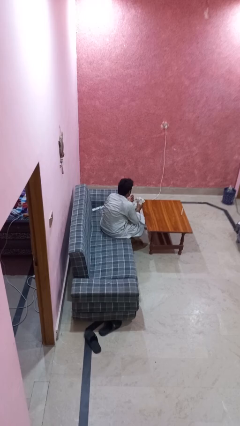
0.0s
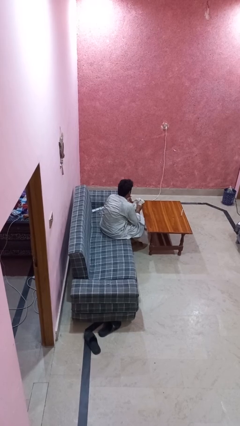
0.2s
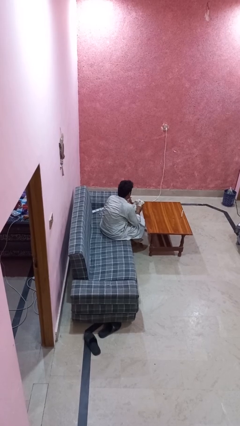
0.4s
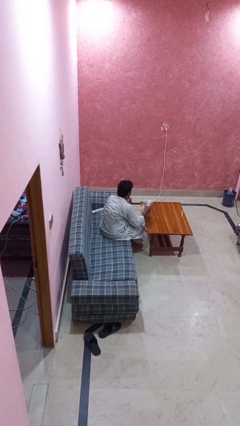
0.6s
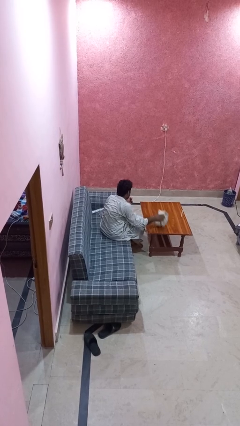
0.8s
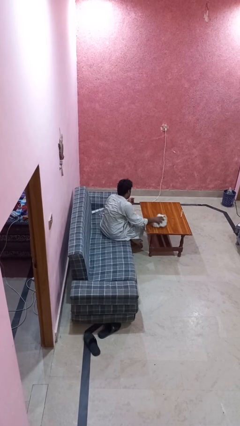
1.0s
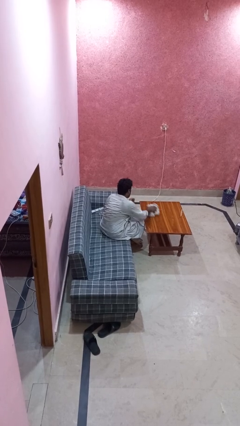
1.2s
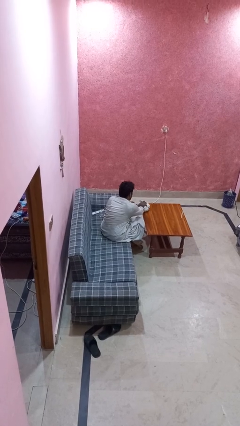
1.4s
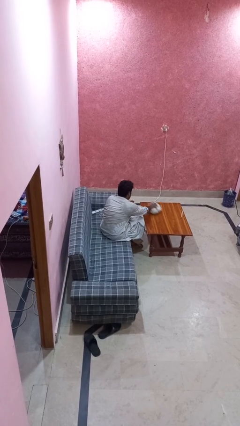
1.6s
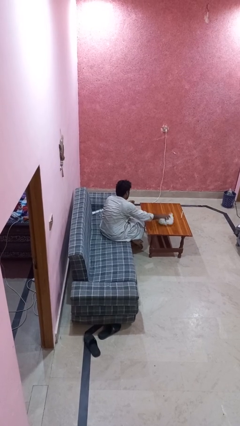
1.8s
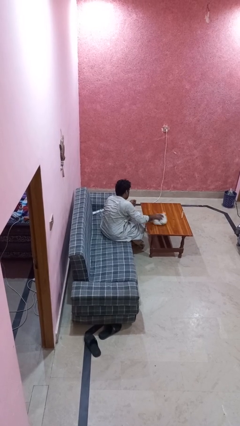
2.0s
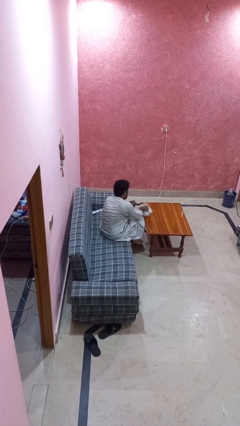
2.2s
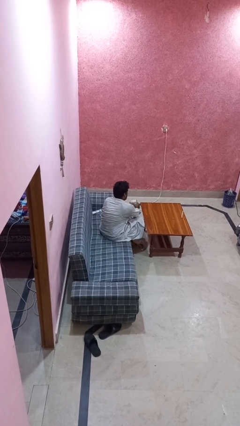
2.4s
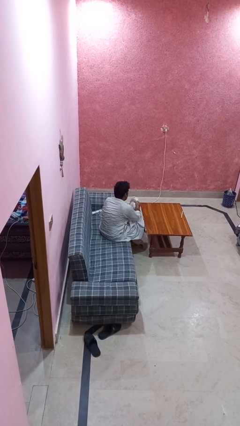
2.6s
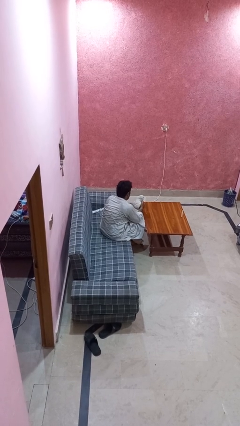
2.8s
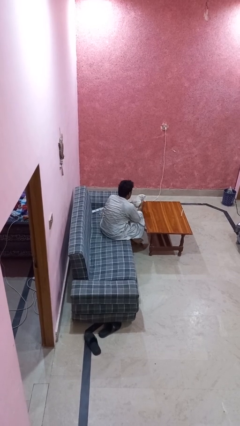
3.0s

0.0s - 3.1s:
person cleans table with rag

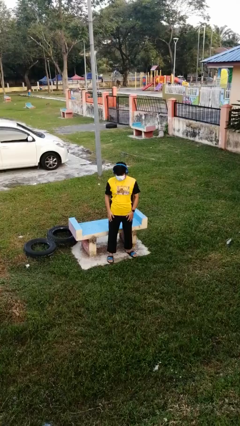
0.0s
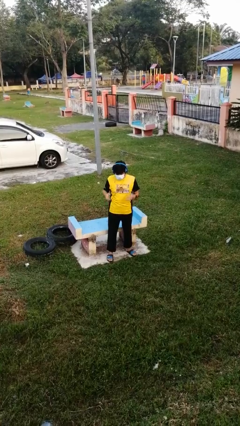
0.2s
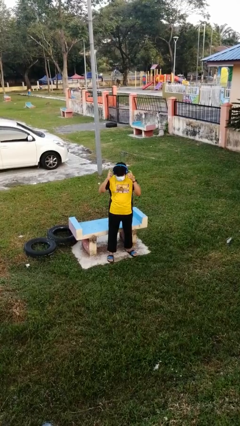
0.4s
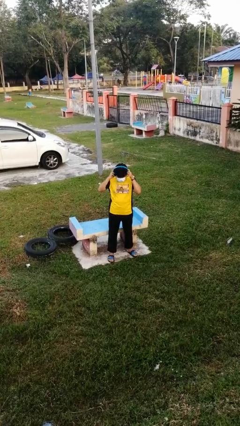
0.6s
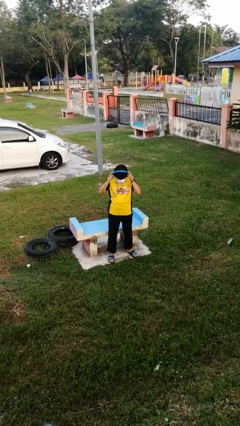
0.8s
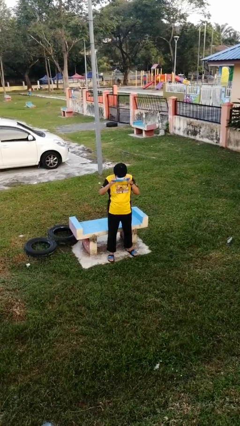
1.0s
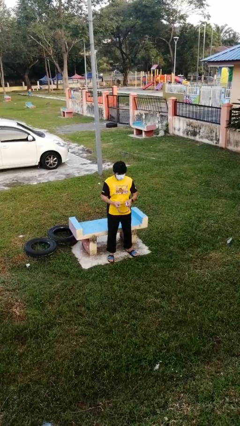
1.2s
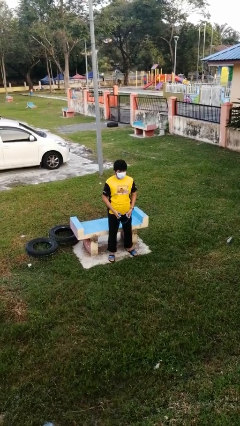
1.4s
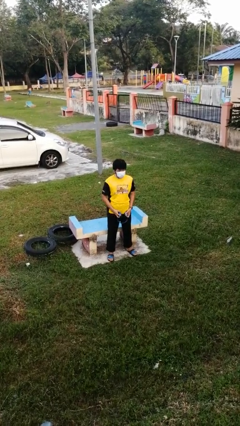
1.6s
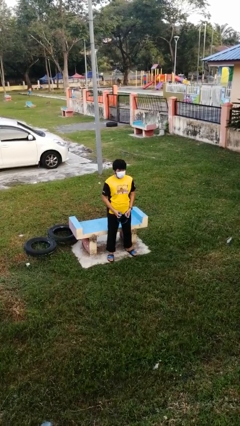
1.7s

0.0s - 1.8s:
person takes off headphones

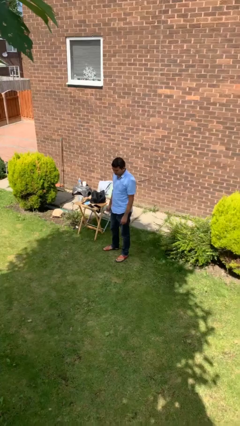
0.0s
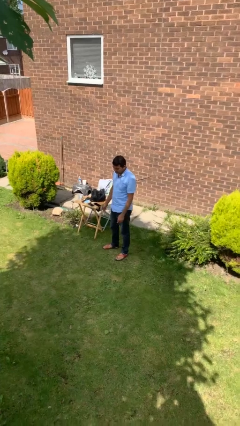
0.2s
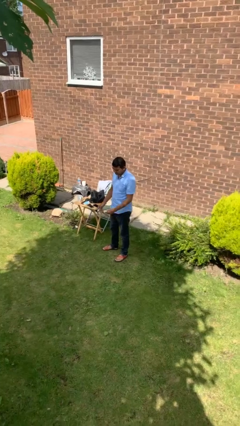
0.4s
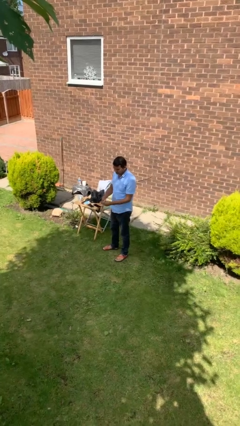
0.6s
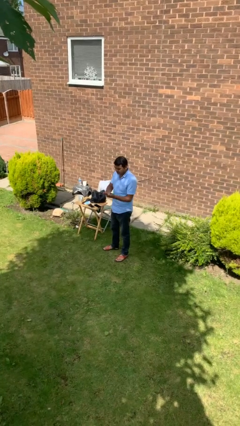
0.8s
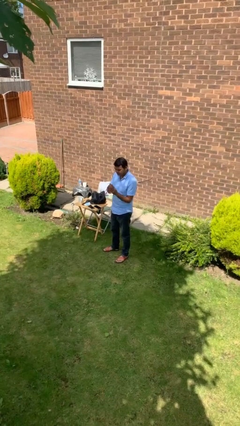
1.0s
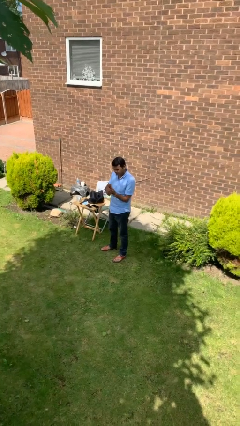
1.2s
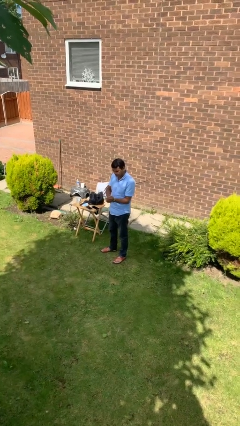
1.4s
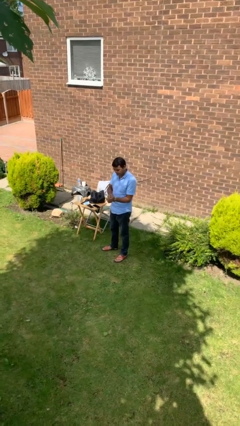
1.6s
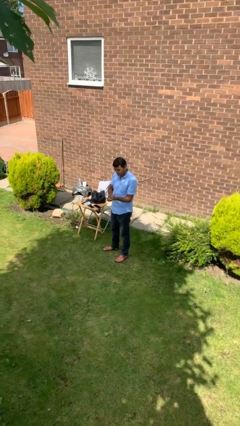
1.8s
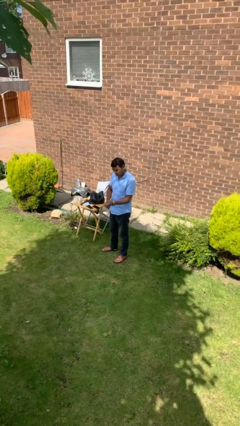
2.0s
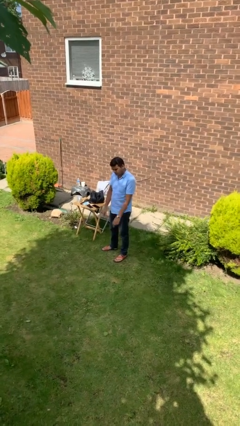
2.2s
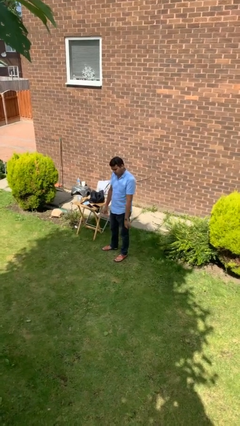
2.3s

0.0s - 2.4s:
person puts on wristwatch

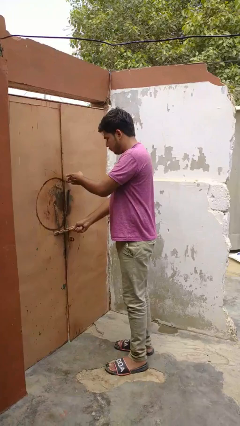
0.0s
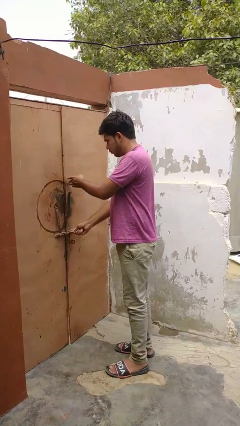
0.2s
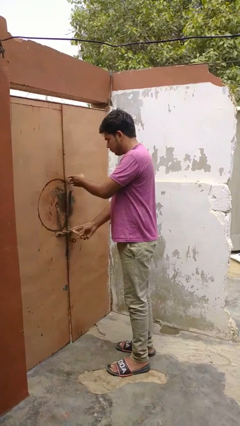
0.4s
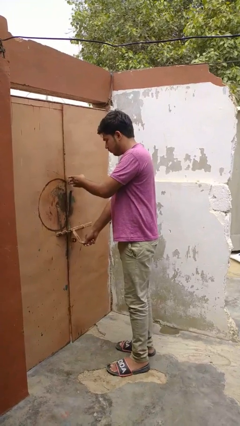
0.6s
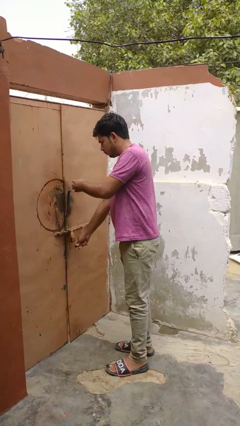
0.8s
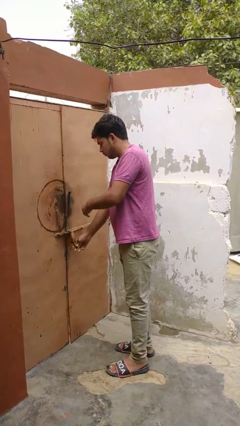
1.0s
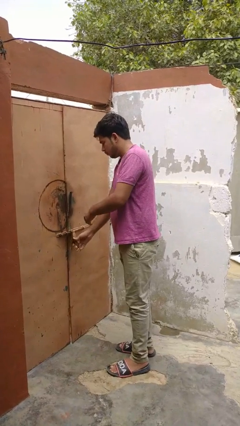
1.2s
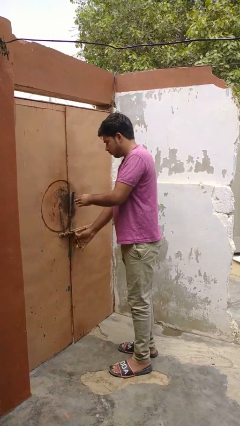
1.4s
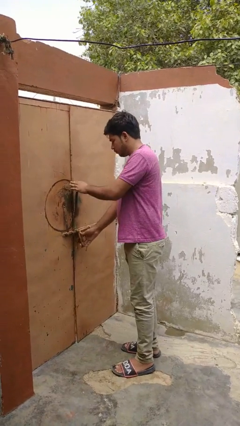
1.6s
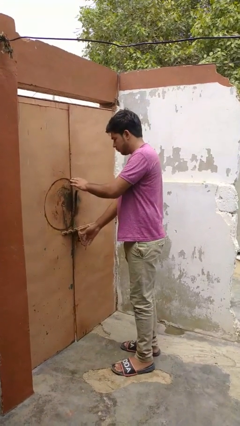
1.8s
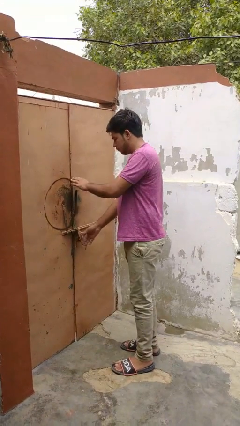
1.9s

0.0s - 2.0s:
person locks door with keys

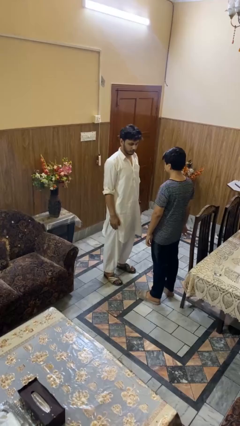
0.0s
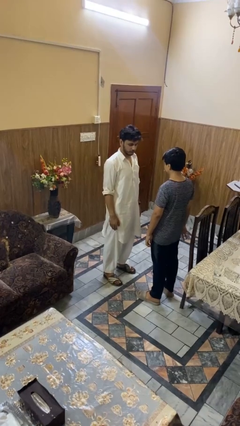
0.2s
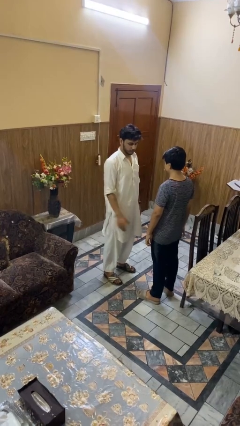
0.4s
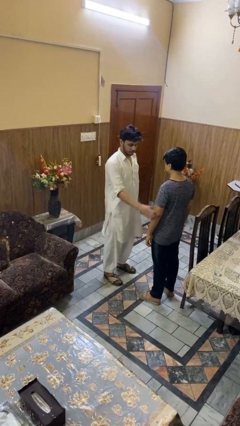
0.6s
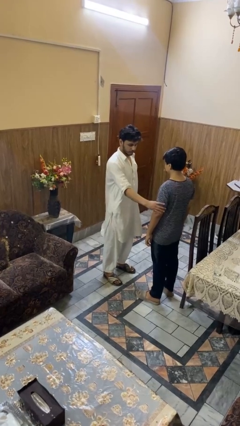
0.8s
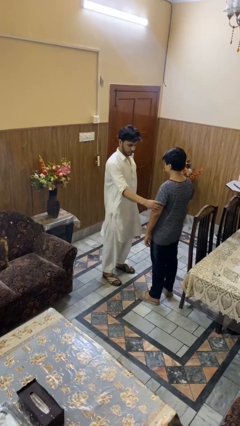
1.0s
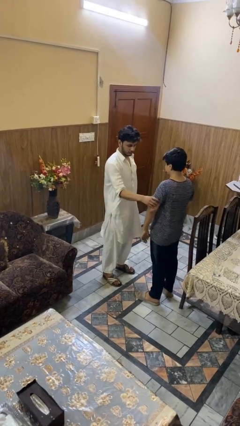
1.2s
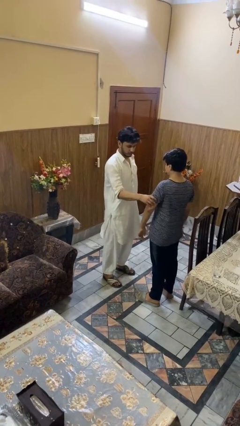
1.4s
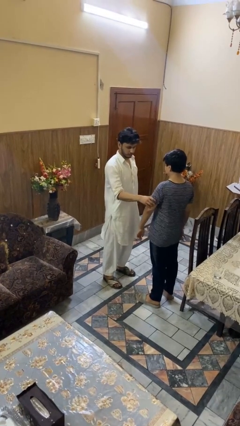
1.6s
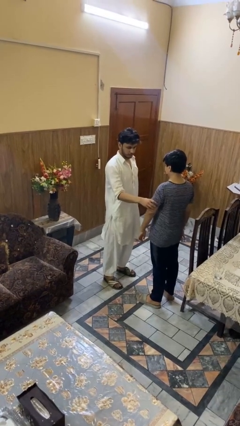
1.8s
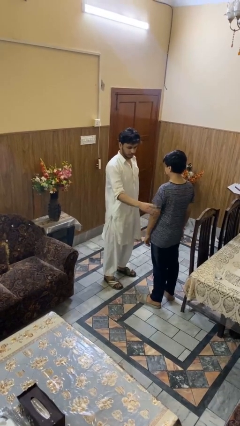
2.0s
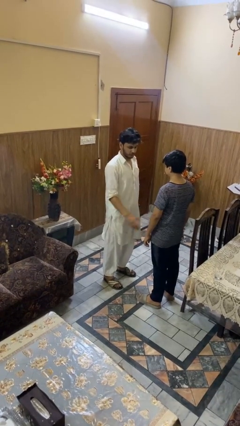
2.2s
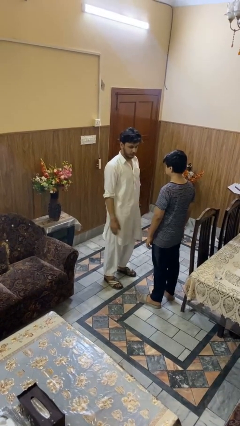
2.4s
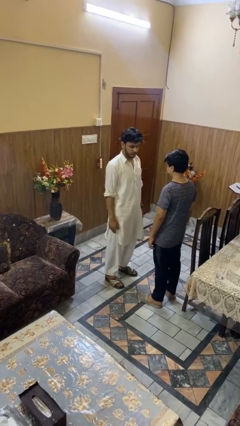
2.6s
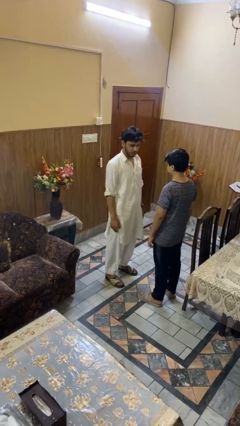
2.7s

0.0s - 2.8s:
person grabs person by bicep

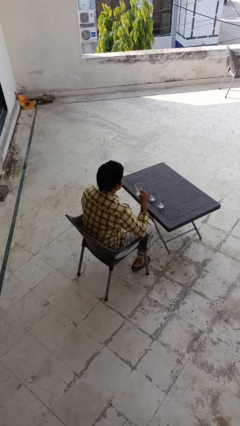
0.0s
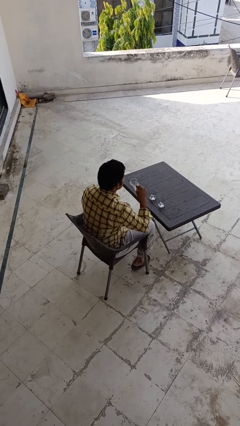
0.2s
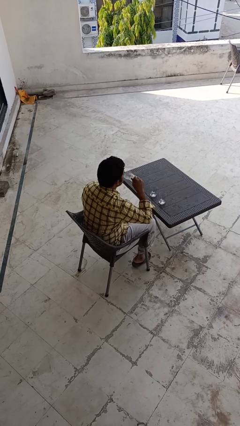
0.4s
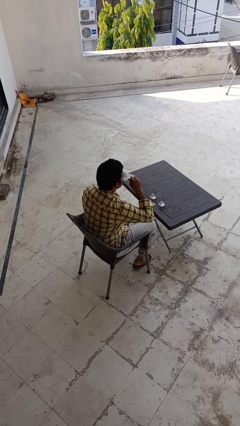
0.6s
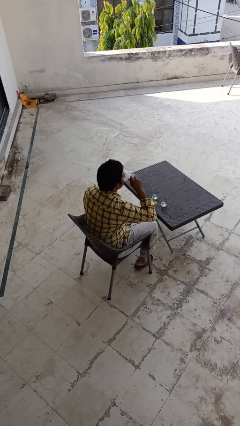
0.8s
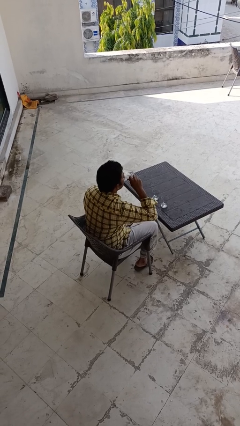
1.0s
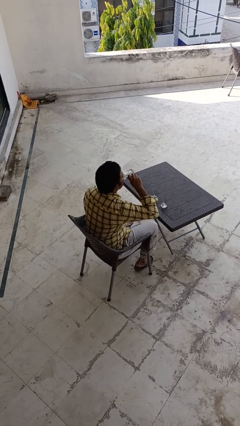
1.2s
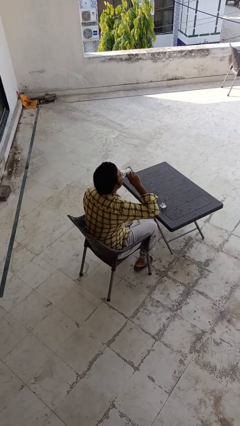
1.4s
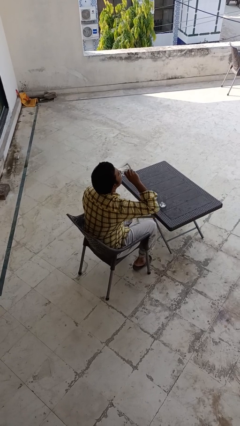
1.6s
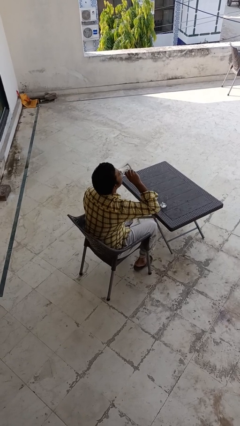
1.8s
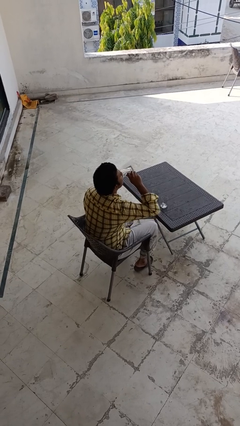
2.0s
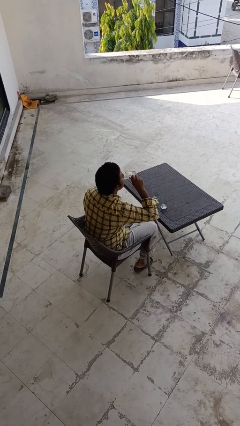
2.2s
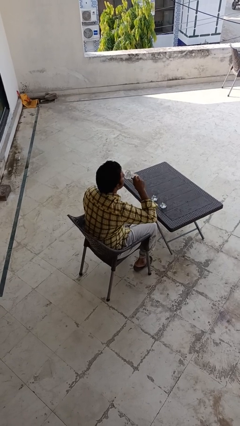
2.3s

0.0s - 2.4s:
person drinks from shotglass

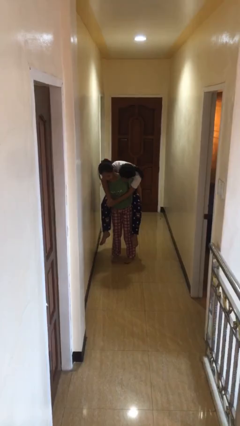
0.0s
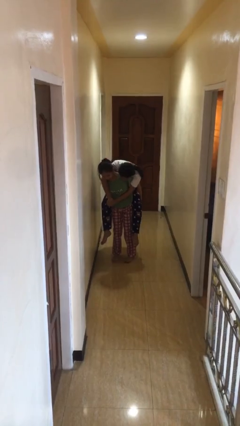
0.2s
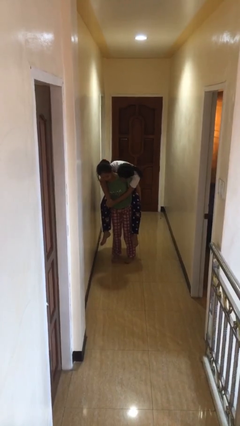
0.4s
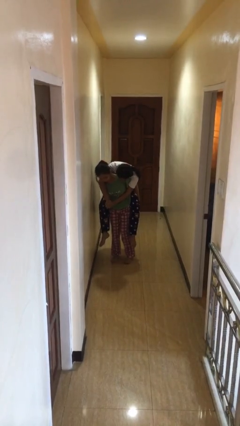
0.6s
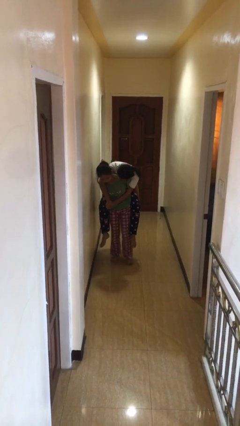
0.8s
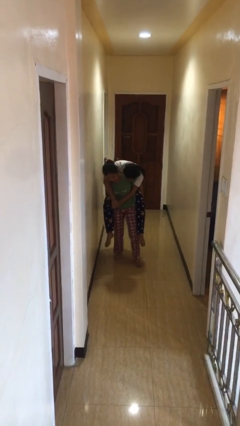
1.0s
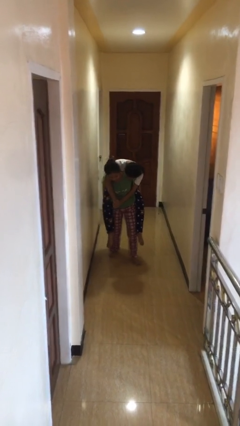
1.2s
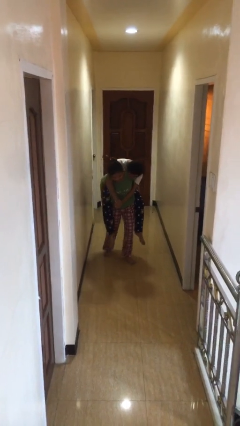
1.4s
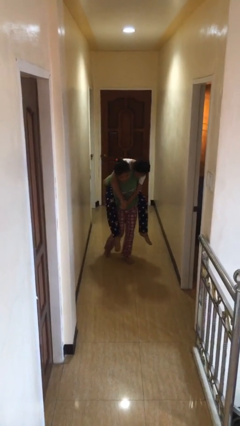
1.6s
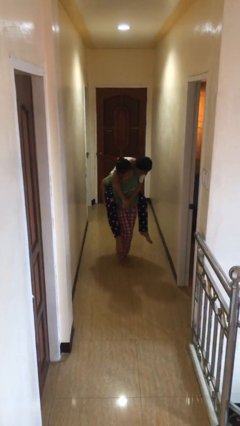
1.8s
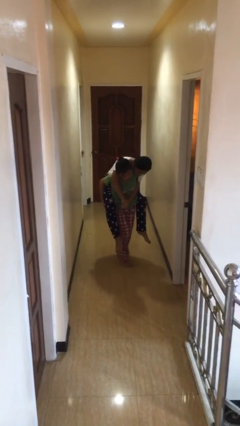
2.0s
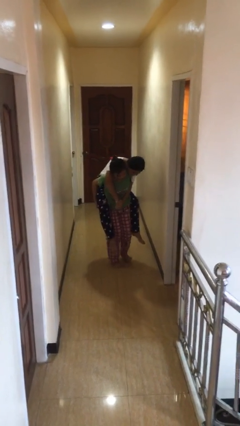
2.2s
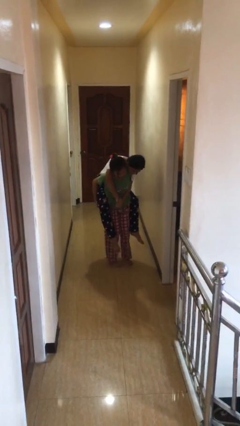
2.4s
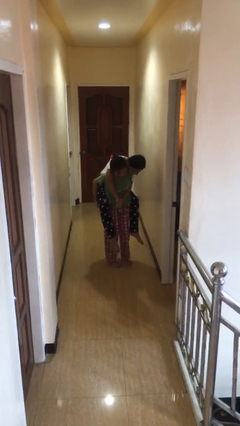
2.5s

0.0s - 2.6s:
person carries person on back
